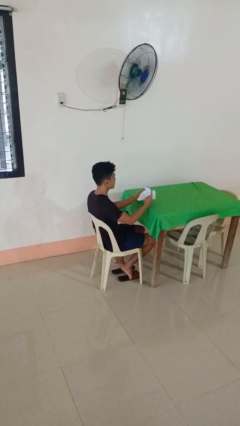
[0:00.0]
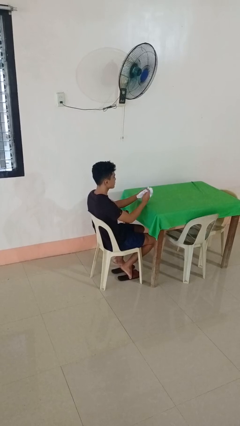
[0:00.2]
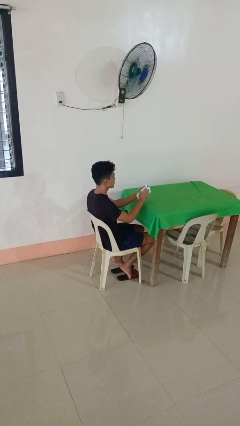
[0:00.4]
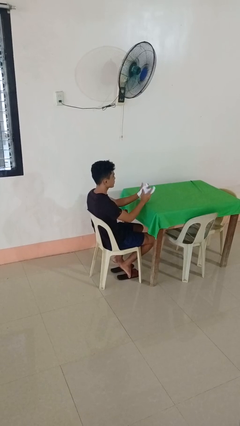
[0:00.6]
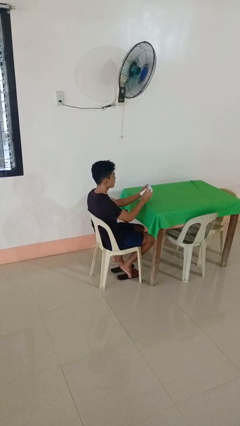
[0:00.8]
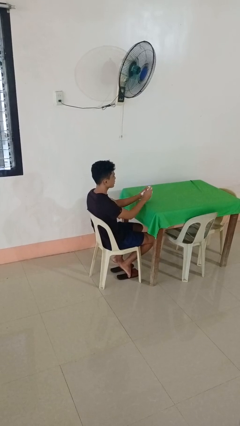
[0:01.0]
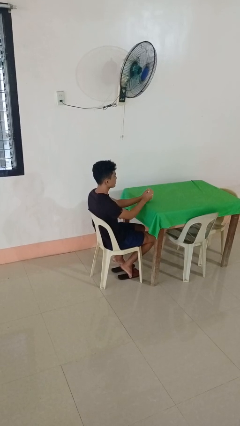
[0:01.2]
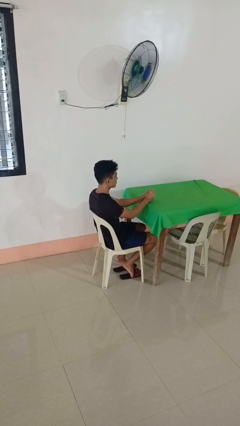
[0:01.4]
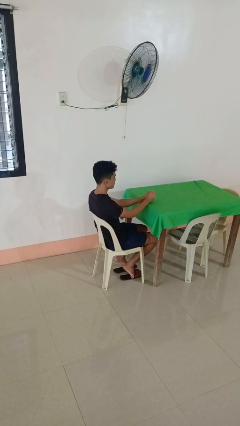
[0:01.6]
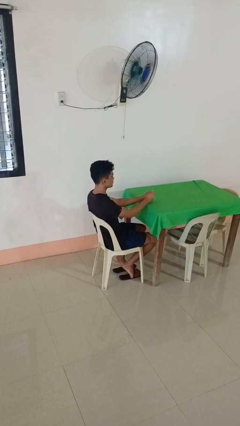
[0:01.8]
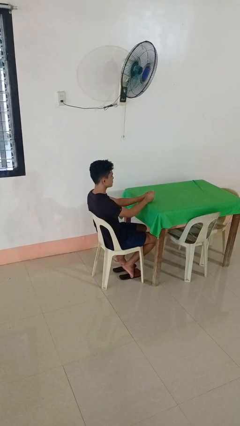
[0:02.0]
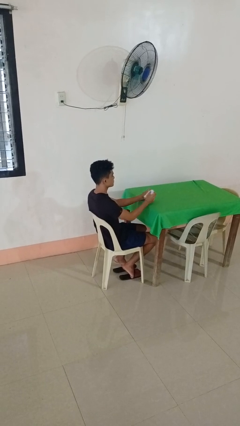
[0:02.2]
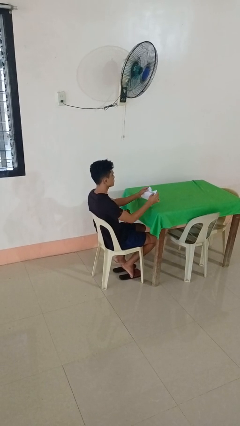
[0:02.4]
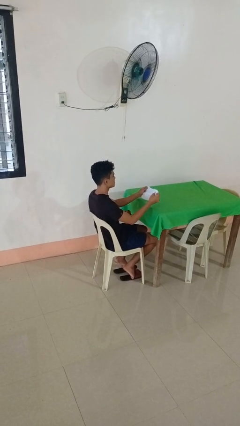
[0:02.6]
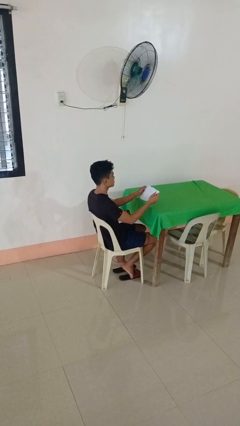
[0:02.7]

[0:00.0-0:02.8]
person crumples paper

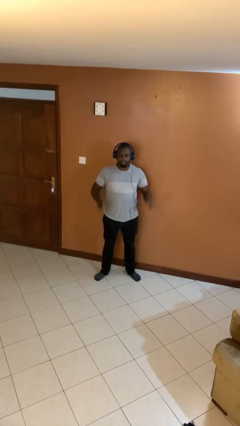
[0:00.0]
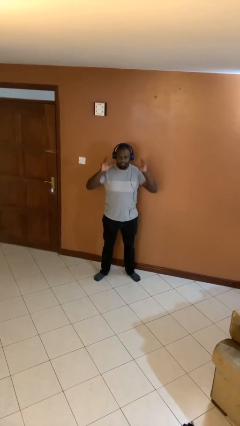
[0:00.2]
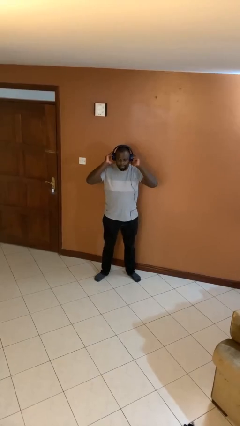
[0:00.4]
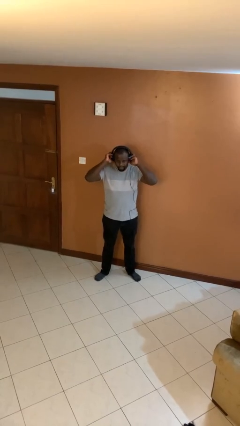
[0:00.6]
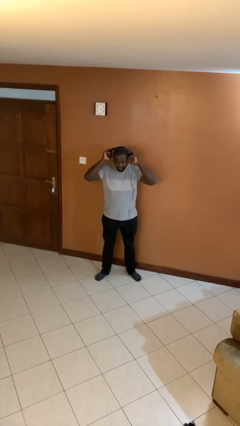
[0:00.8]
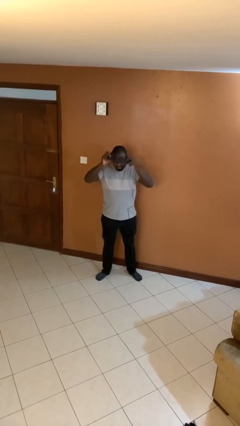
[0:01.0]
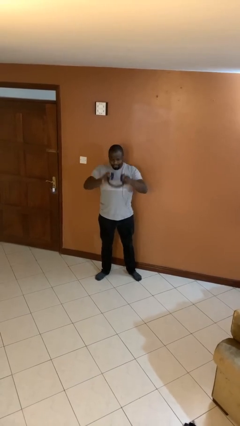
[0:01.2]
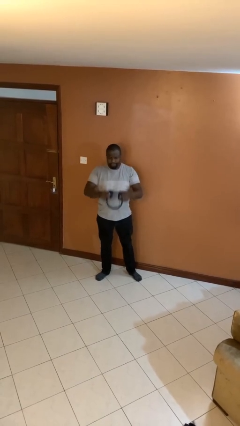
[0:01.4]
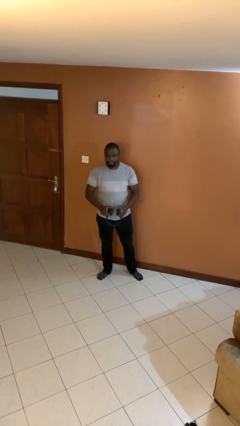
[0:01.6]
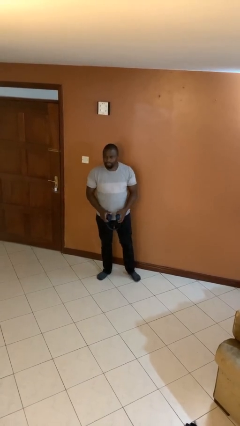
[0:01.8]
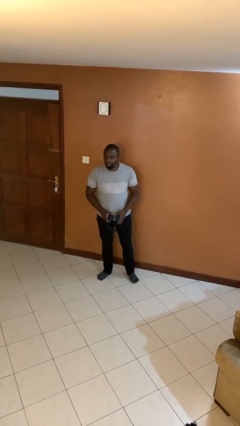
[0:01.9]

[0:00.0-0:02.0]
person takes off headphones

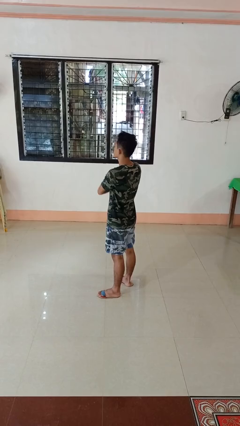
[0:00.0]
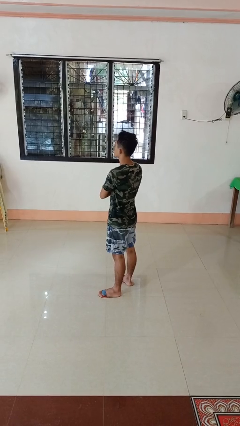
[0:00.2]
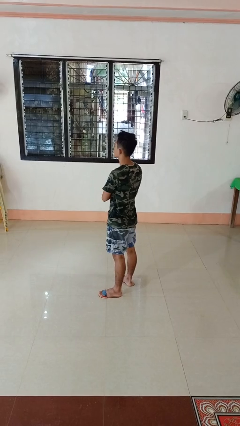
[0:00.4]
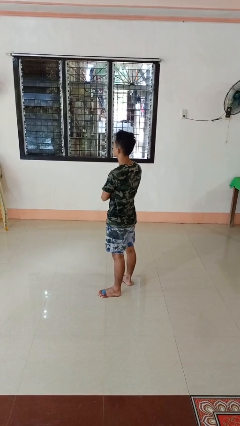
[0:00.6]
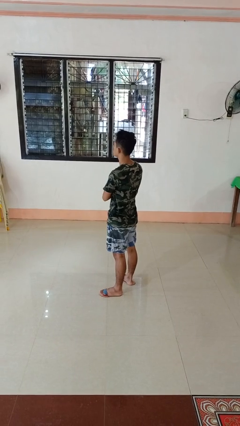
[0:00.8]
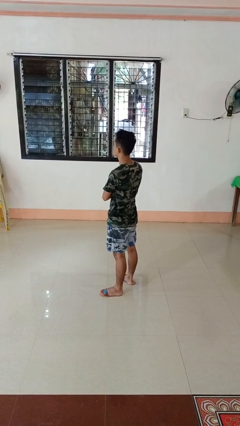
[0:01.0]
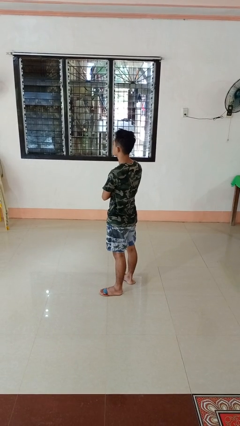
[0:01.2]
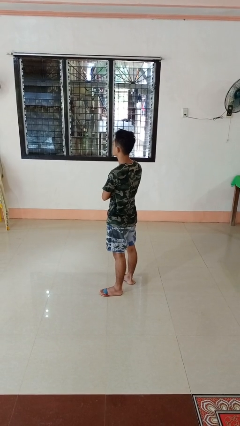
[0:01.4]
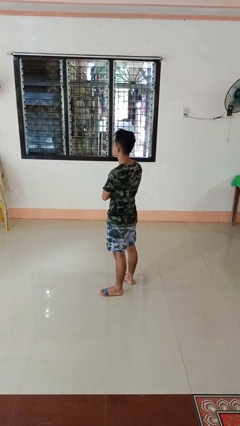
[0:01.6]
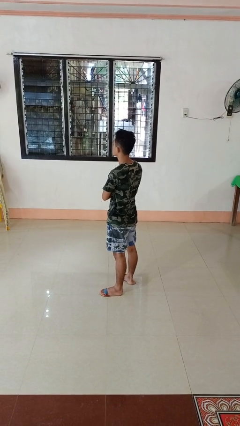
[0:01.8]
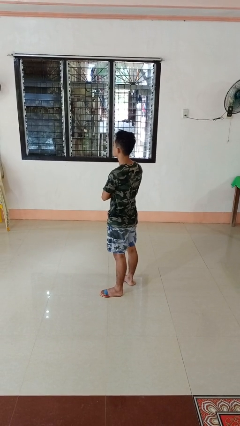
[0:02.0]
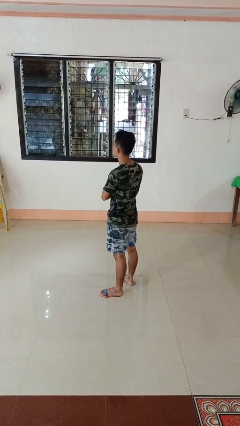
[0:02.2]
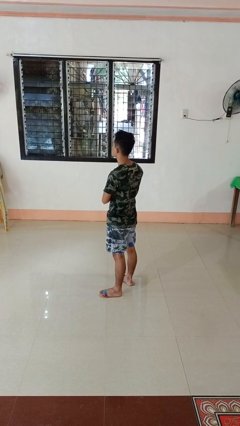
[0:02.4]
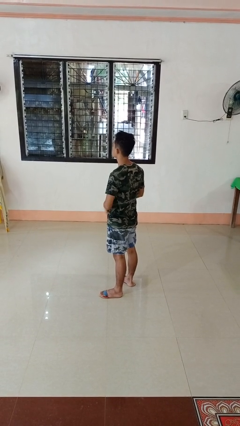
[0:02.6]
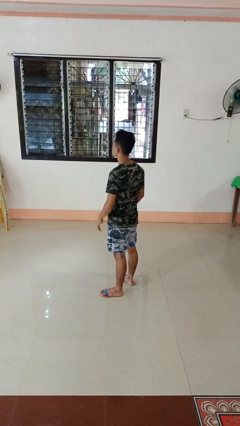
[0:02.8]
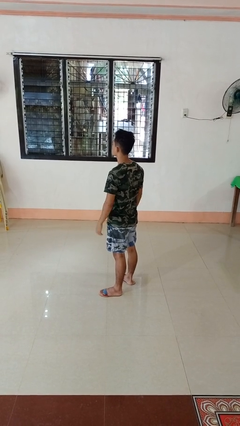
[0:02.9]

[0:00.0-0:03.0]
person crosses arms

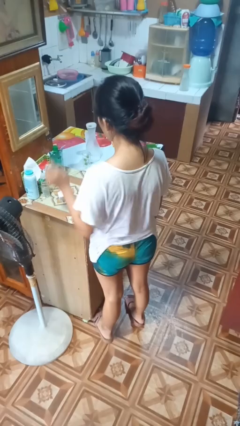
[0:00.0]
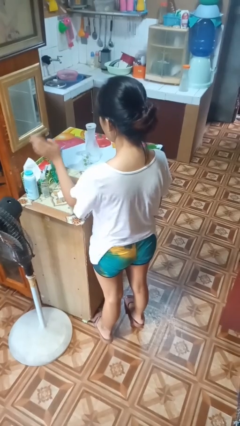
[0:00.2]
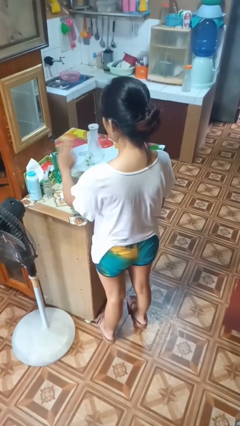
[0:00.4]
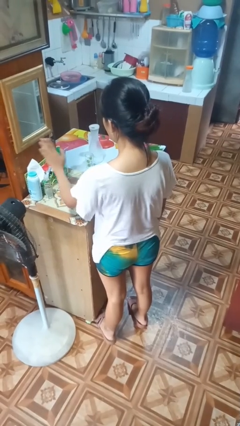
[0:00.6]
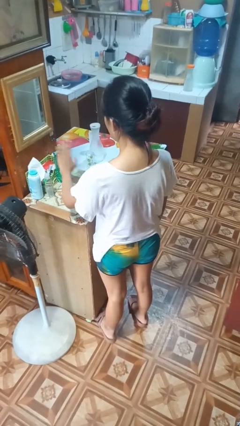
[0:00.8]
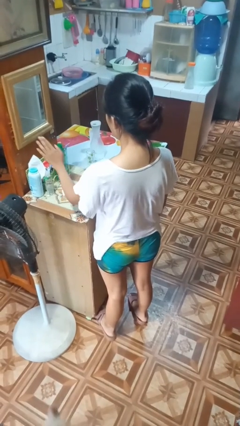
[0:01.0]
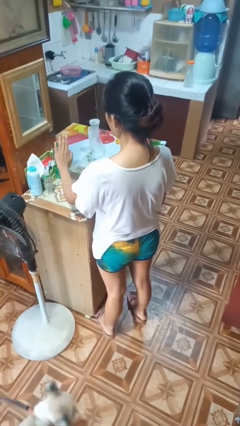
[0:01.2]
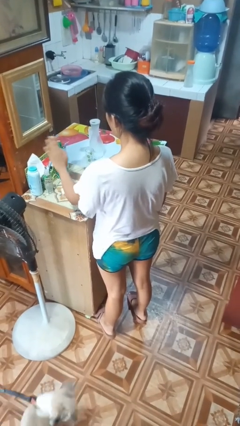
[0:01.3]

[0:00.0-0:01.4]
person waves hand over object

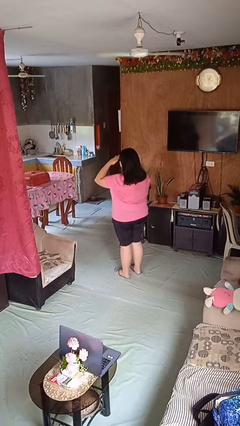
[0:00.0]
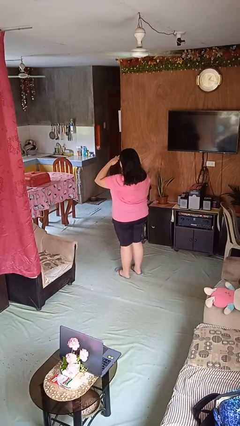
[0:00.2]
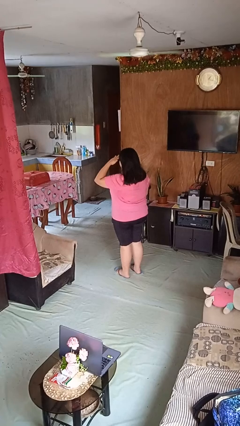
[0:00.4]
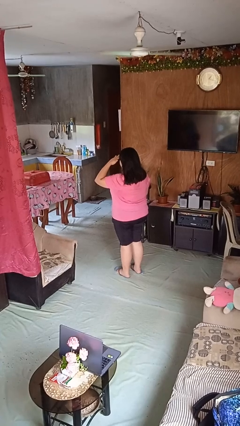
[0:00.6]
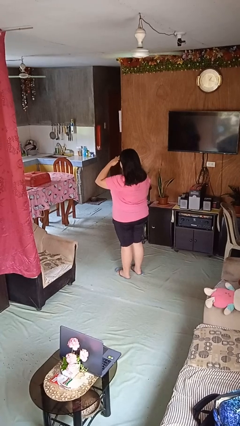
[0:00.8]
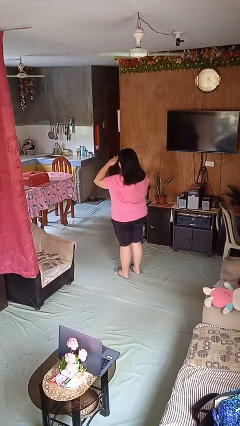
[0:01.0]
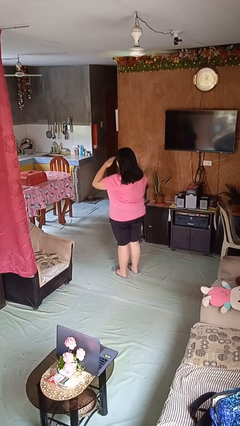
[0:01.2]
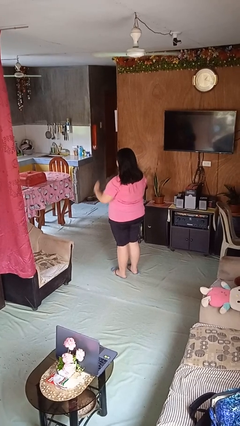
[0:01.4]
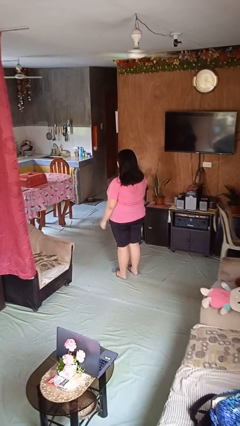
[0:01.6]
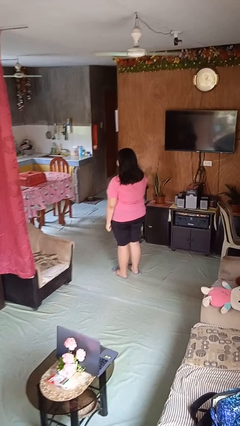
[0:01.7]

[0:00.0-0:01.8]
person salutes

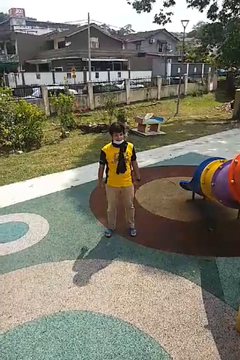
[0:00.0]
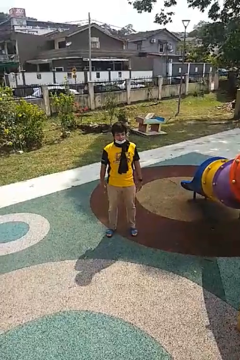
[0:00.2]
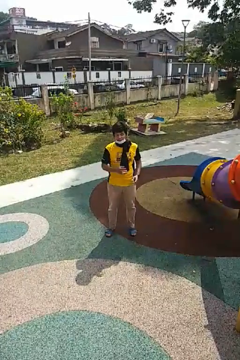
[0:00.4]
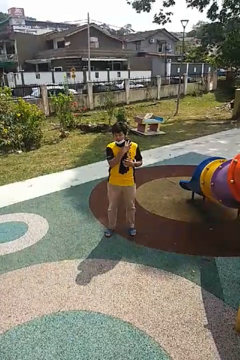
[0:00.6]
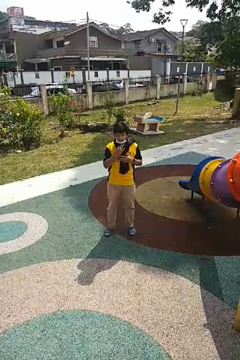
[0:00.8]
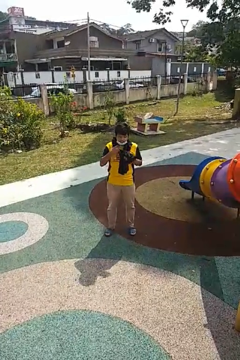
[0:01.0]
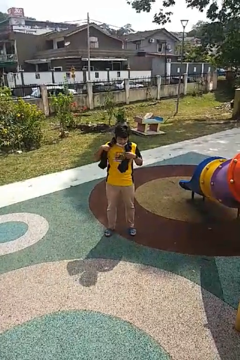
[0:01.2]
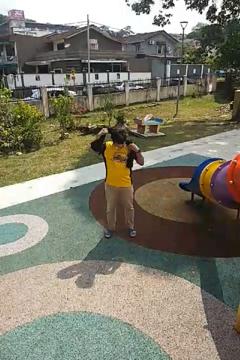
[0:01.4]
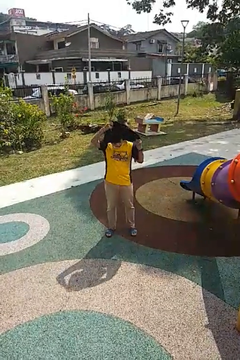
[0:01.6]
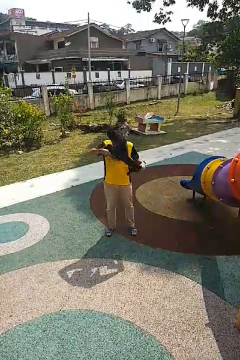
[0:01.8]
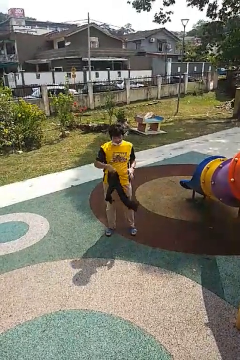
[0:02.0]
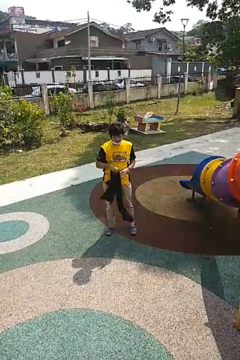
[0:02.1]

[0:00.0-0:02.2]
person takes off scarf

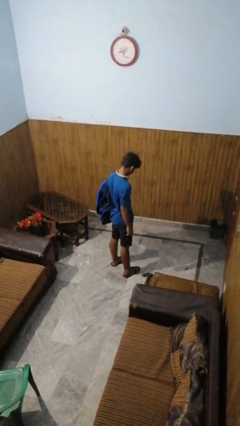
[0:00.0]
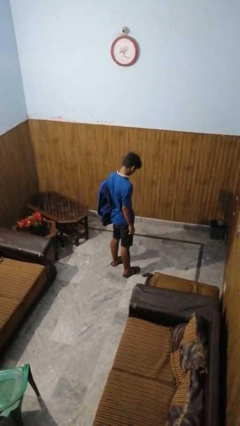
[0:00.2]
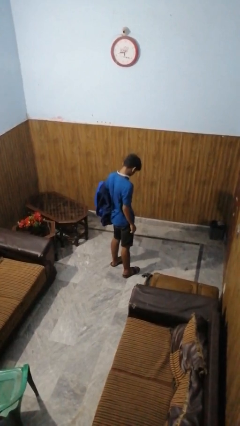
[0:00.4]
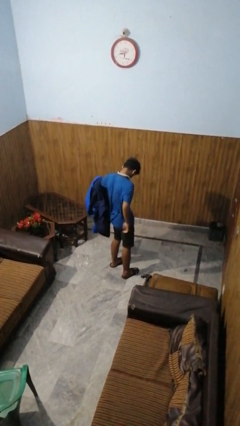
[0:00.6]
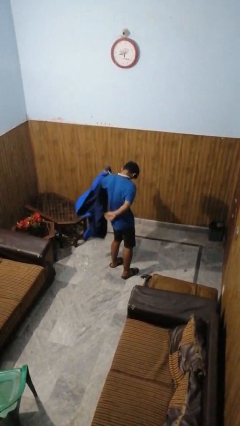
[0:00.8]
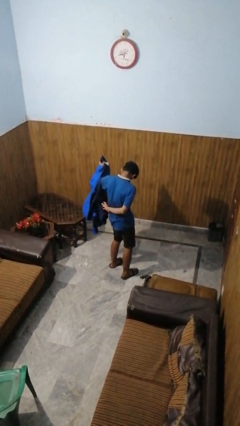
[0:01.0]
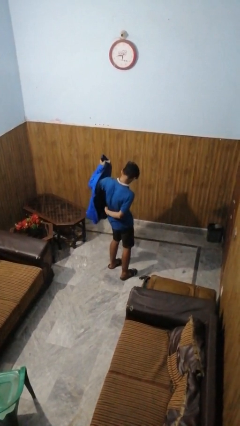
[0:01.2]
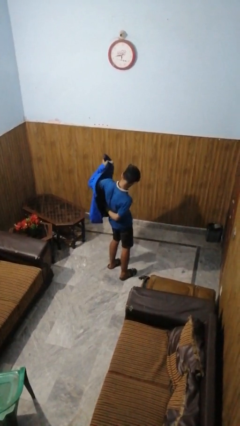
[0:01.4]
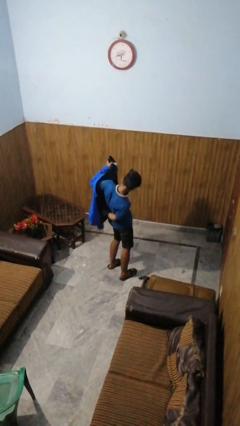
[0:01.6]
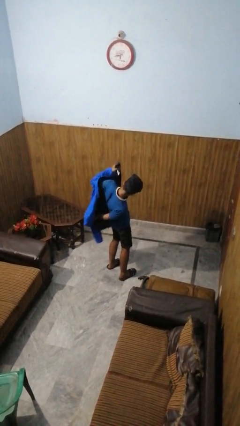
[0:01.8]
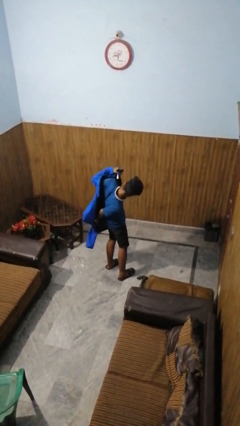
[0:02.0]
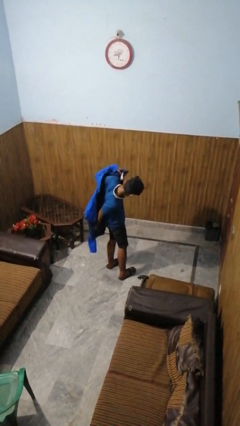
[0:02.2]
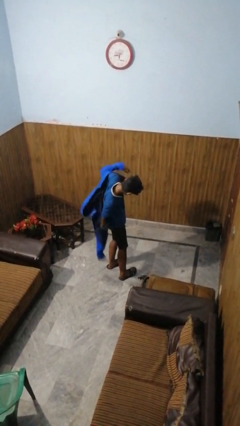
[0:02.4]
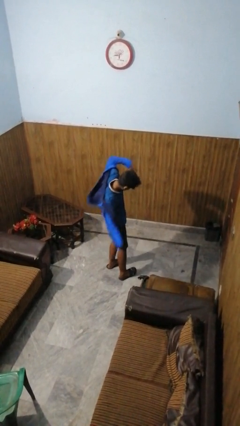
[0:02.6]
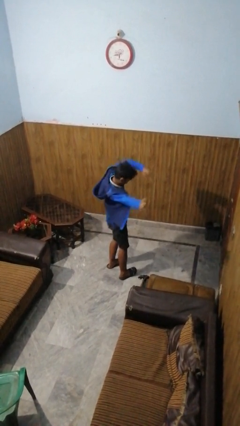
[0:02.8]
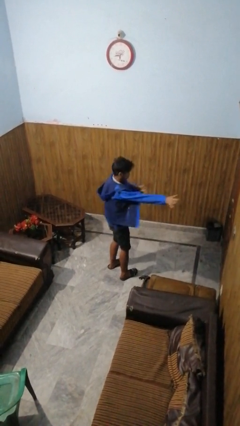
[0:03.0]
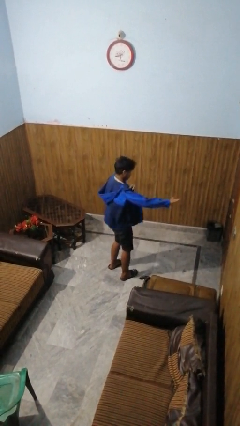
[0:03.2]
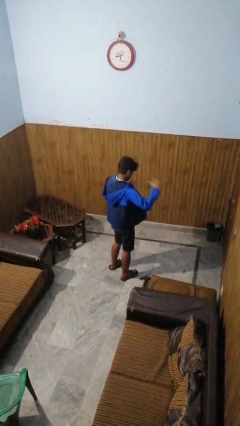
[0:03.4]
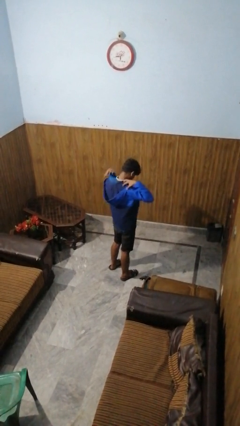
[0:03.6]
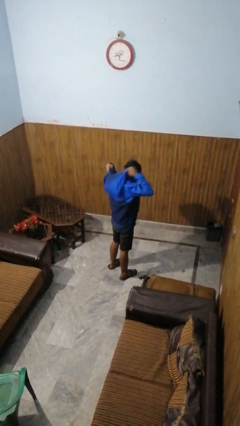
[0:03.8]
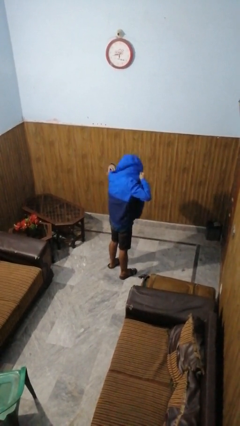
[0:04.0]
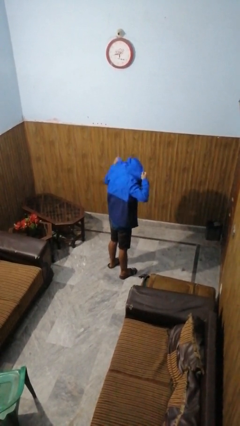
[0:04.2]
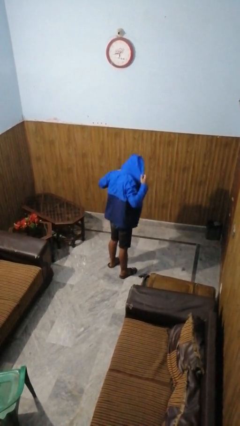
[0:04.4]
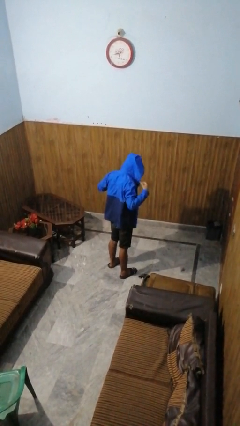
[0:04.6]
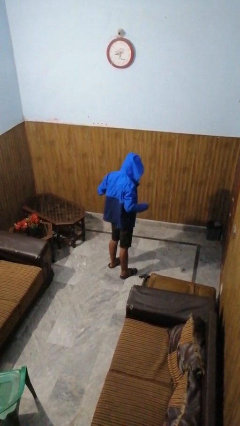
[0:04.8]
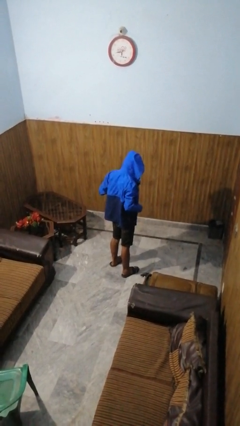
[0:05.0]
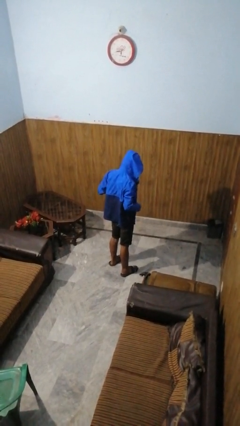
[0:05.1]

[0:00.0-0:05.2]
person puts on hoodie
